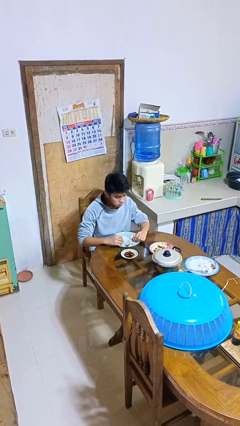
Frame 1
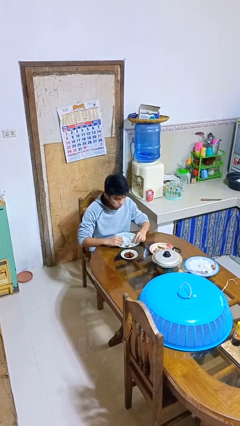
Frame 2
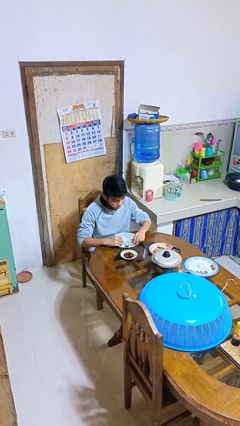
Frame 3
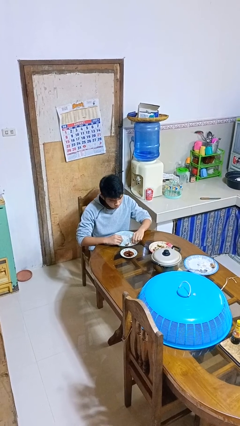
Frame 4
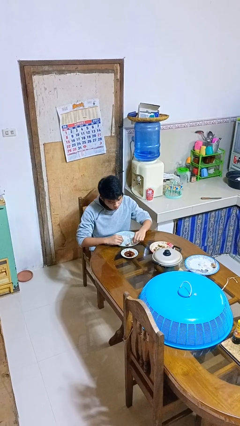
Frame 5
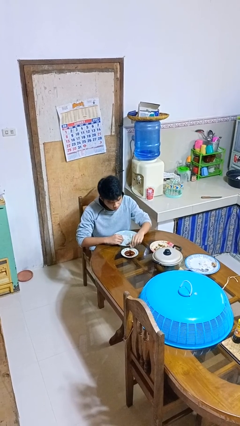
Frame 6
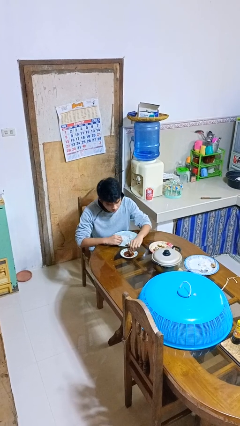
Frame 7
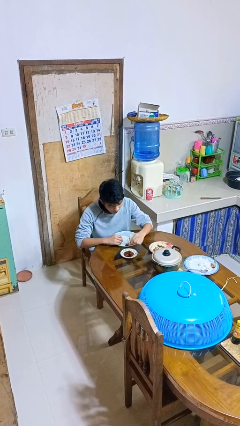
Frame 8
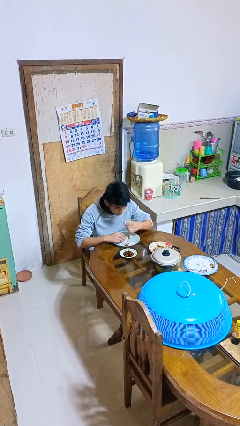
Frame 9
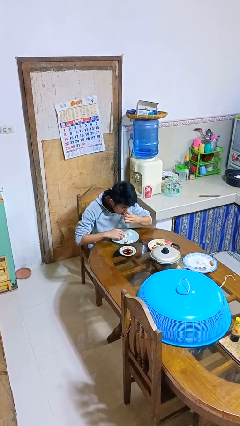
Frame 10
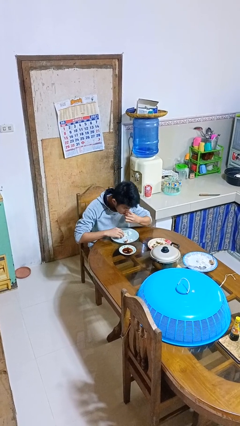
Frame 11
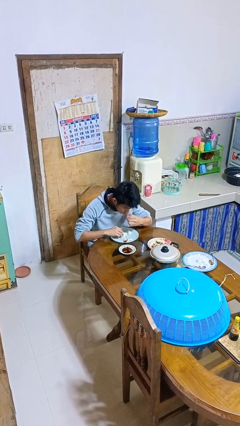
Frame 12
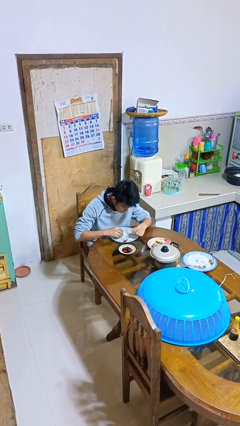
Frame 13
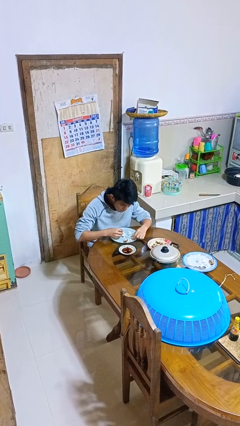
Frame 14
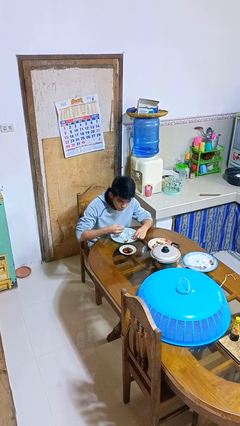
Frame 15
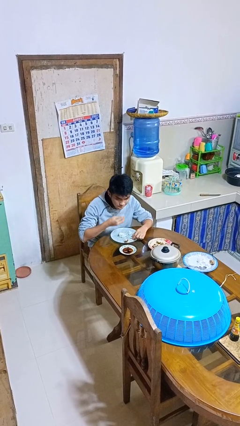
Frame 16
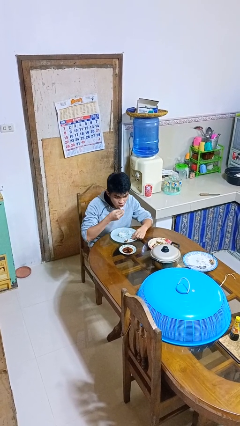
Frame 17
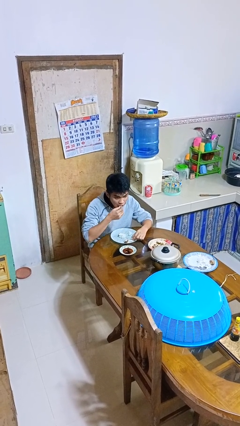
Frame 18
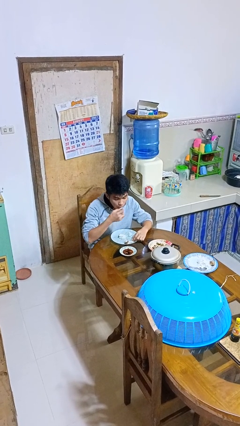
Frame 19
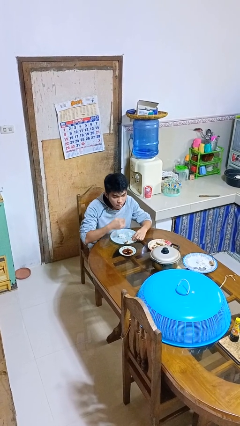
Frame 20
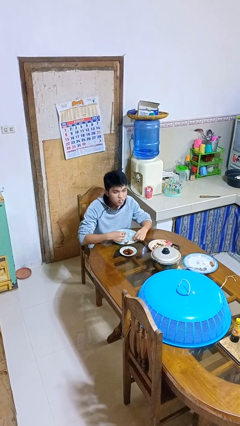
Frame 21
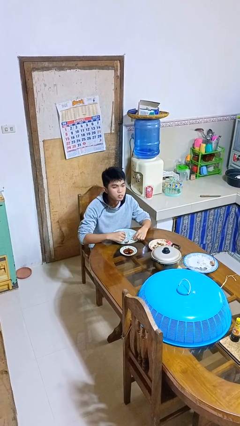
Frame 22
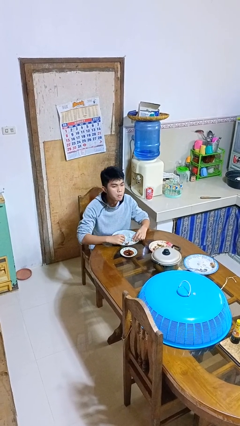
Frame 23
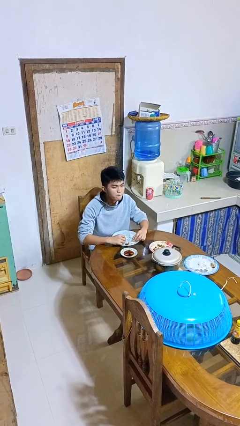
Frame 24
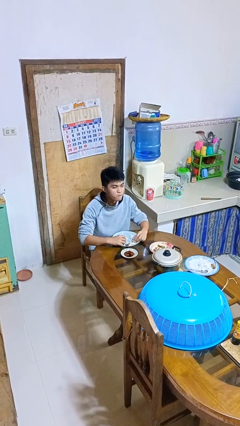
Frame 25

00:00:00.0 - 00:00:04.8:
person eats with hands

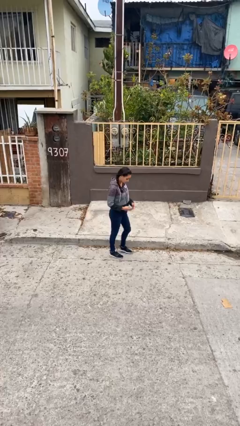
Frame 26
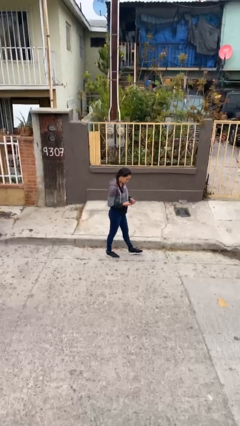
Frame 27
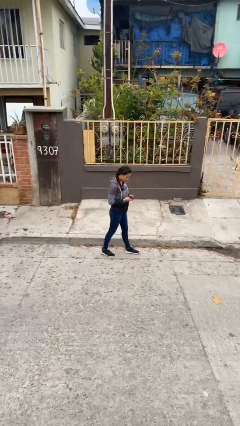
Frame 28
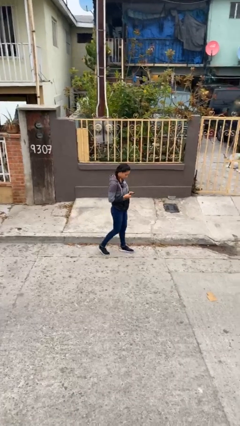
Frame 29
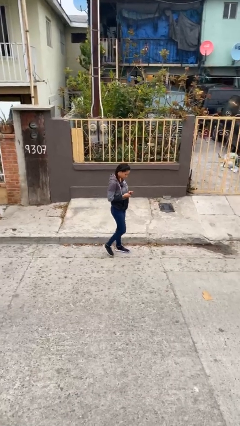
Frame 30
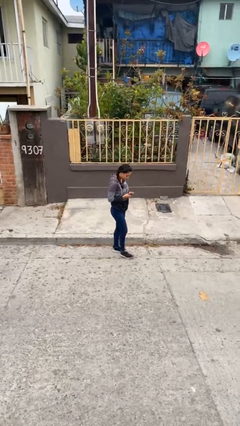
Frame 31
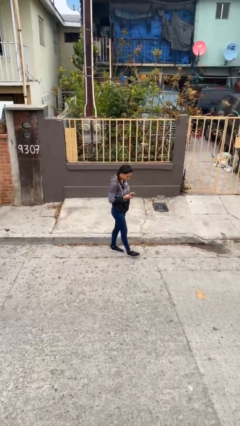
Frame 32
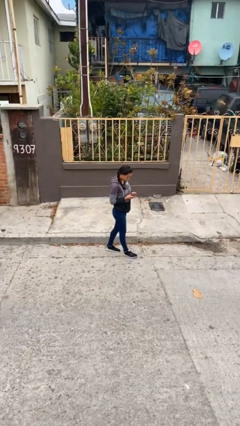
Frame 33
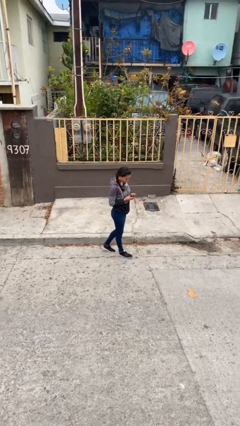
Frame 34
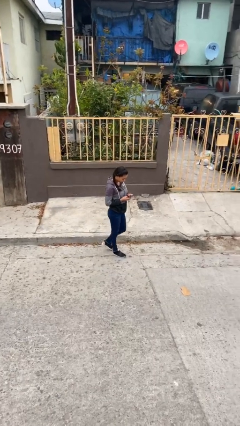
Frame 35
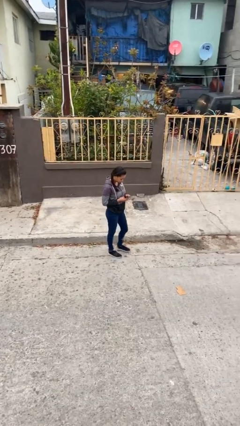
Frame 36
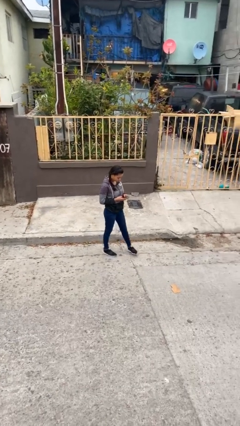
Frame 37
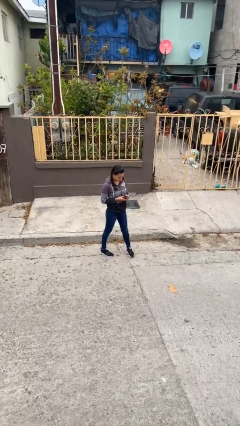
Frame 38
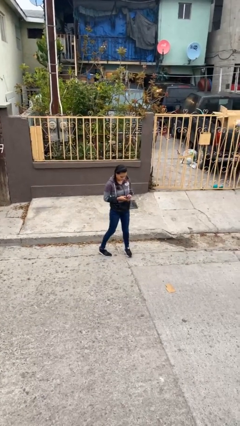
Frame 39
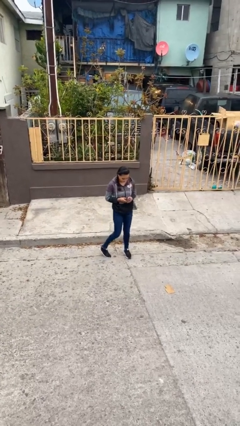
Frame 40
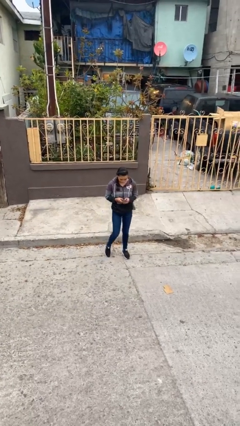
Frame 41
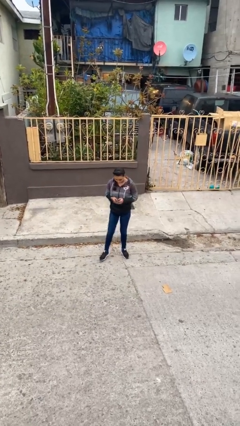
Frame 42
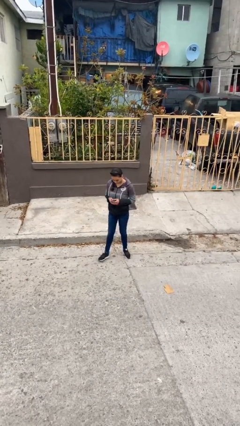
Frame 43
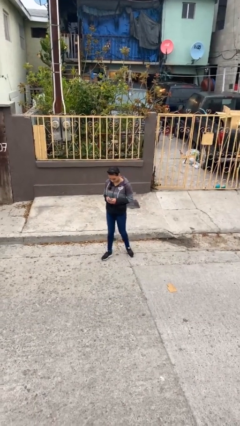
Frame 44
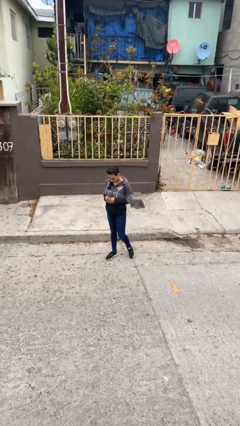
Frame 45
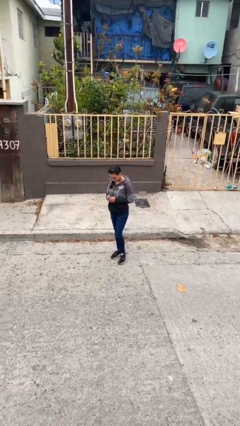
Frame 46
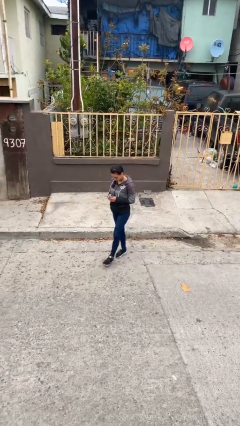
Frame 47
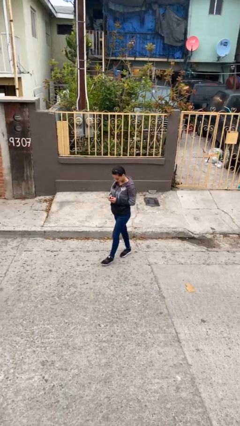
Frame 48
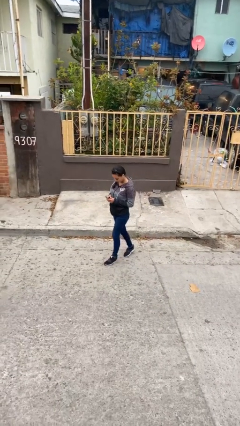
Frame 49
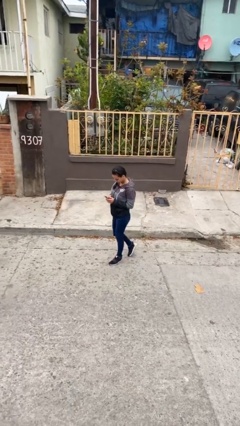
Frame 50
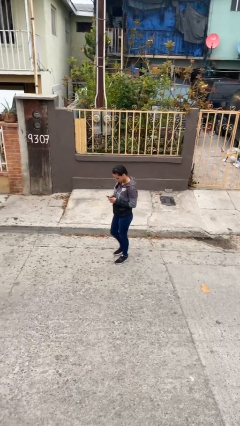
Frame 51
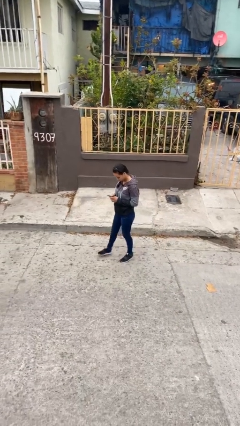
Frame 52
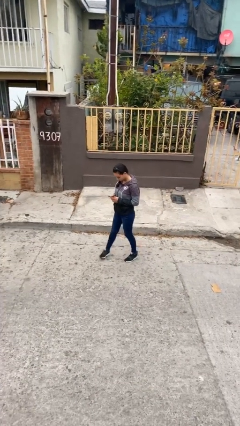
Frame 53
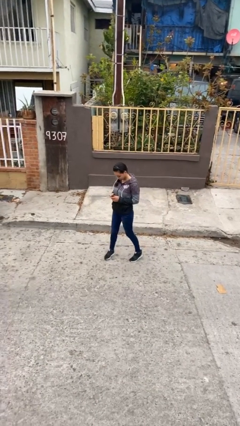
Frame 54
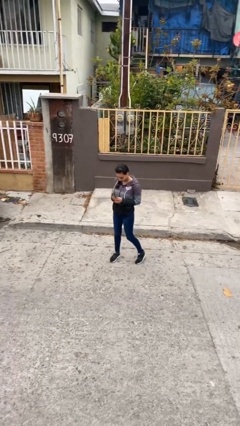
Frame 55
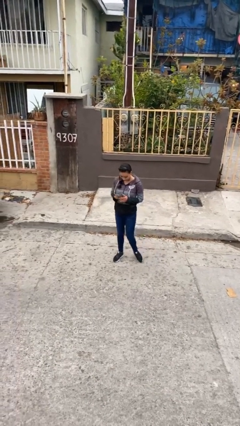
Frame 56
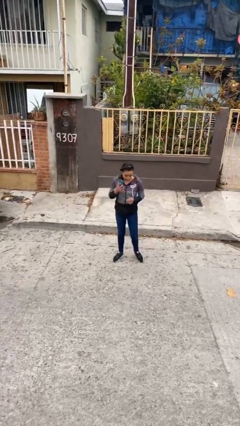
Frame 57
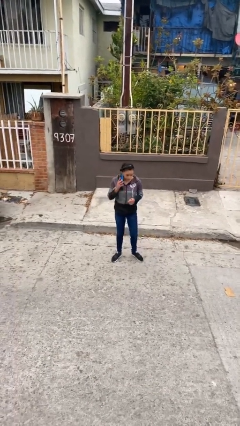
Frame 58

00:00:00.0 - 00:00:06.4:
person texts on phone

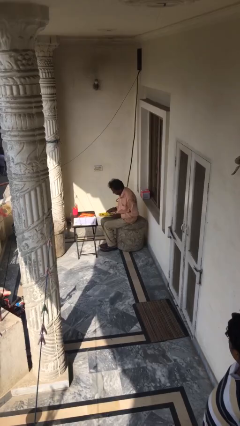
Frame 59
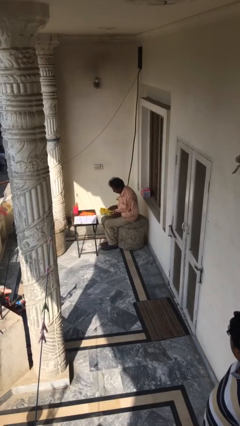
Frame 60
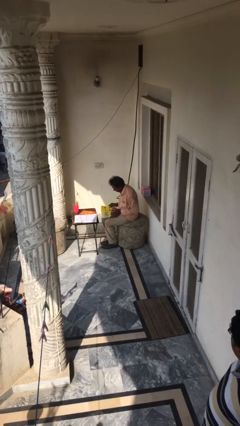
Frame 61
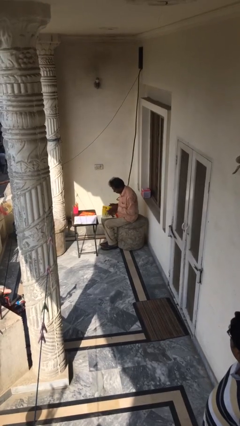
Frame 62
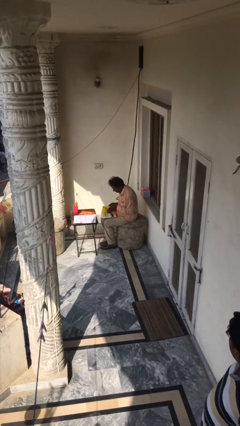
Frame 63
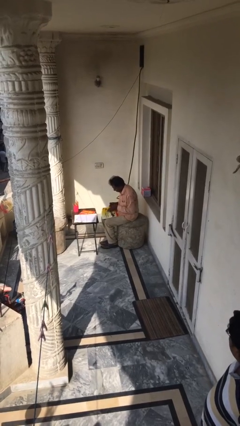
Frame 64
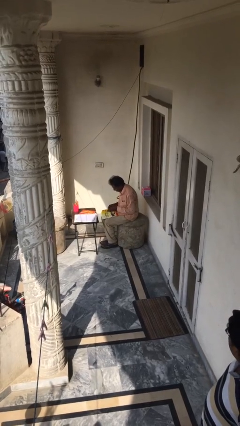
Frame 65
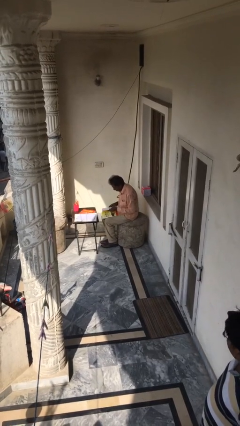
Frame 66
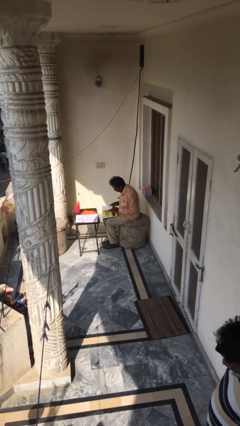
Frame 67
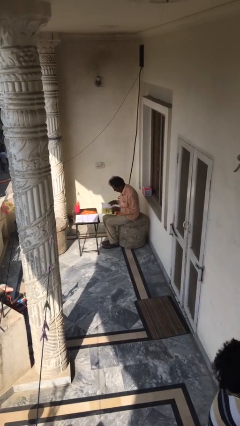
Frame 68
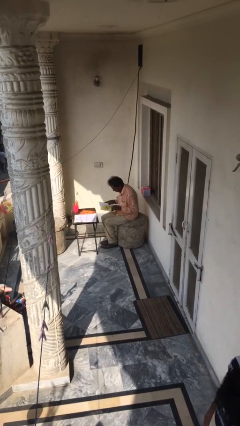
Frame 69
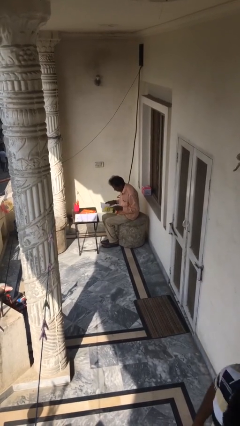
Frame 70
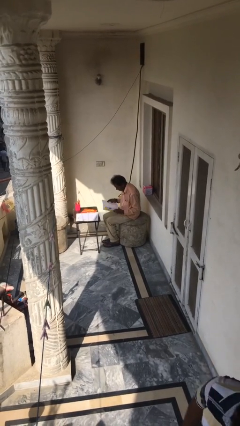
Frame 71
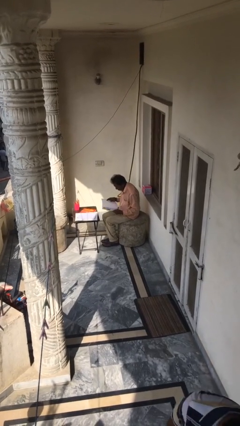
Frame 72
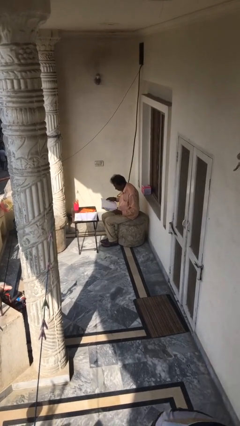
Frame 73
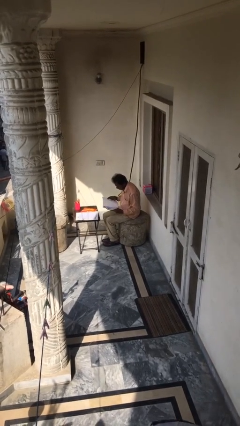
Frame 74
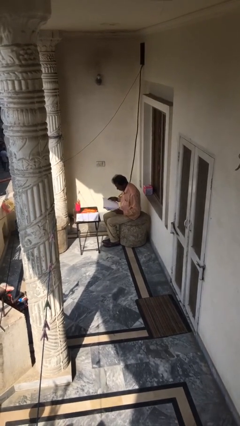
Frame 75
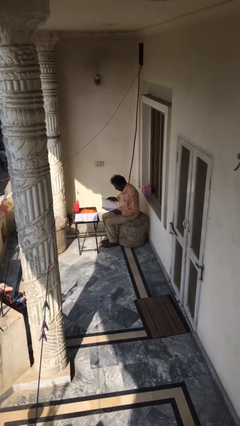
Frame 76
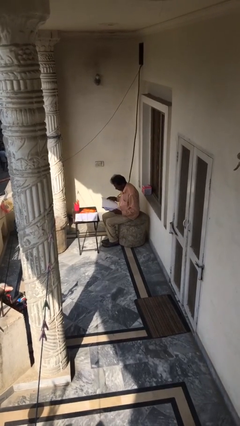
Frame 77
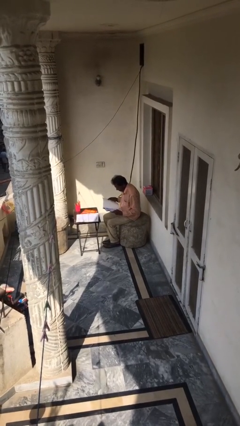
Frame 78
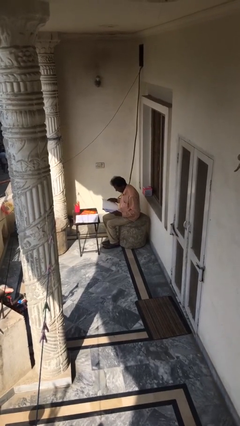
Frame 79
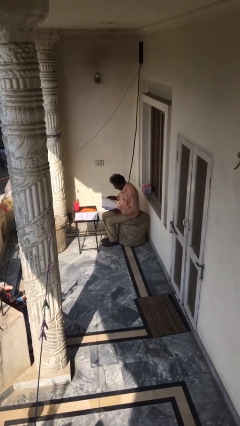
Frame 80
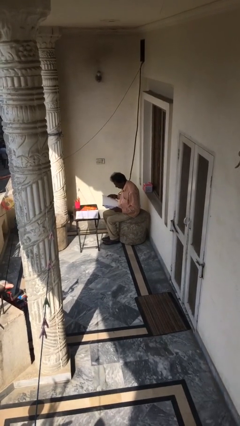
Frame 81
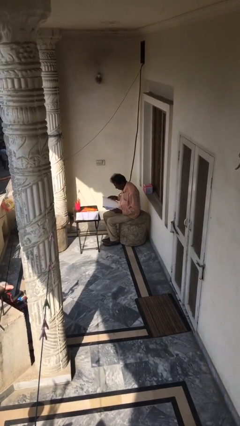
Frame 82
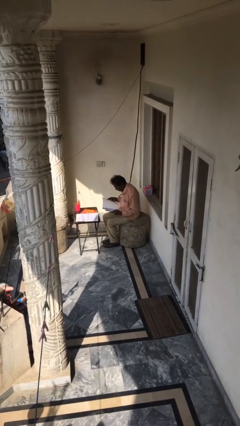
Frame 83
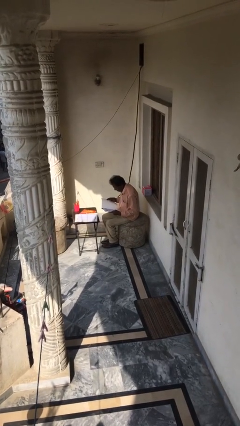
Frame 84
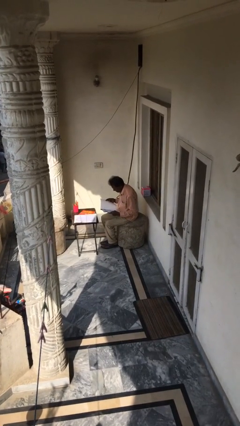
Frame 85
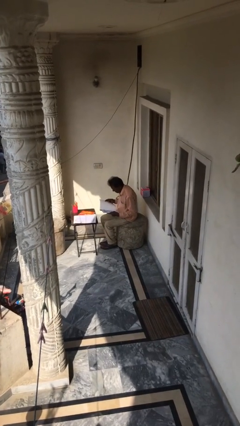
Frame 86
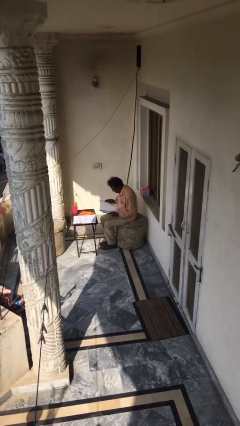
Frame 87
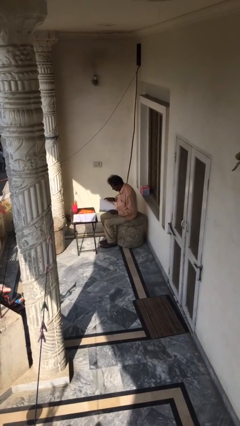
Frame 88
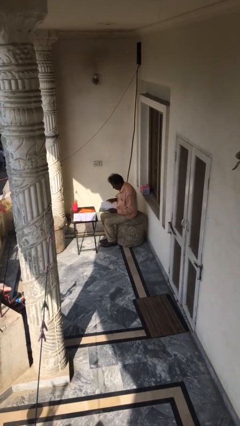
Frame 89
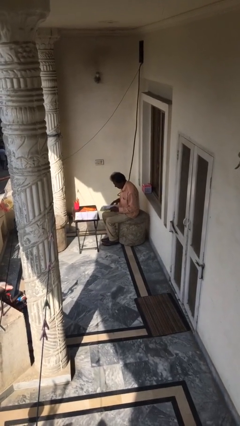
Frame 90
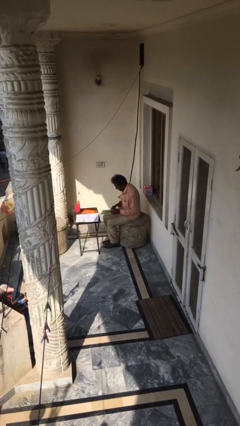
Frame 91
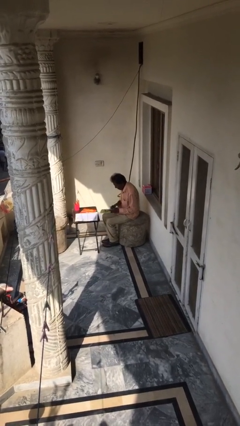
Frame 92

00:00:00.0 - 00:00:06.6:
person reads document

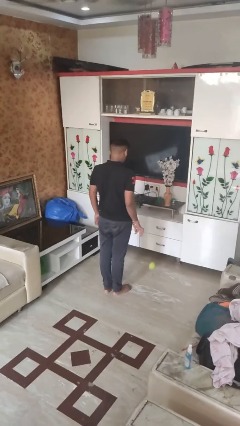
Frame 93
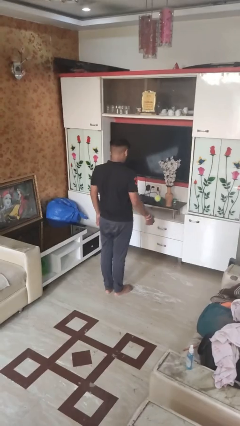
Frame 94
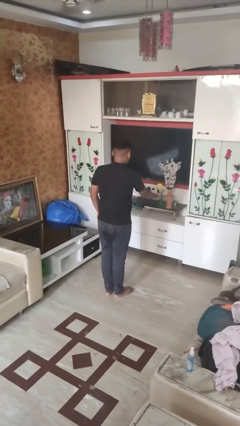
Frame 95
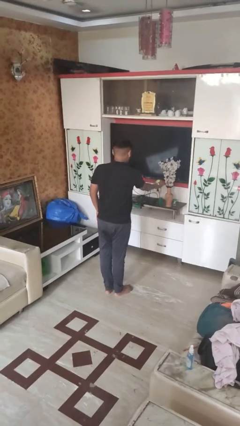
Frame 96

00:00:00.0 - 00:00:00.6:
person bounces ball on floor
